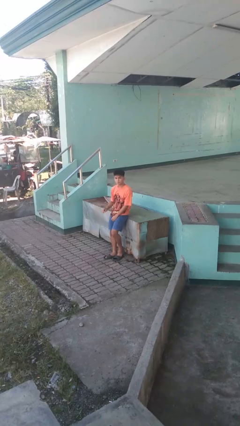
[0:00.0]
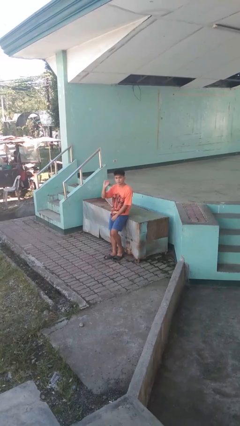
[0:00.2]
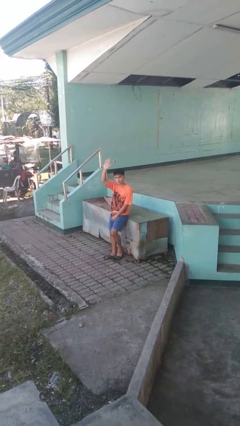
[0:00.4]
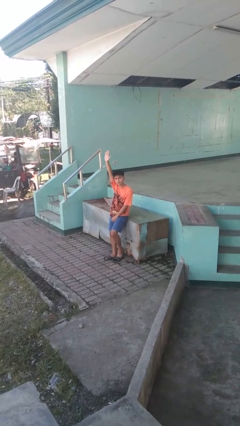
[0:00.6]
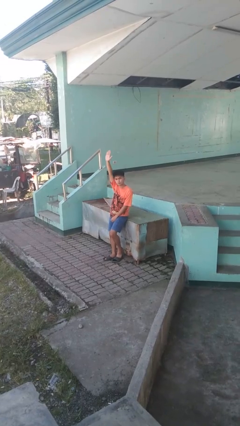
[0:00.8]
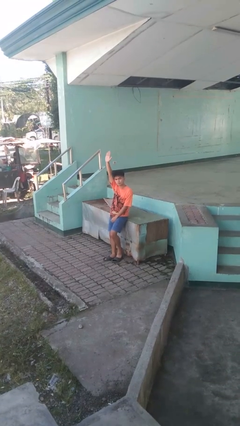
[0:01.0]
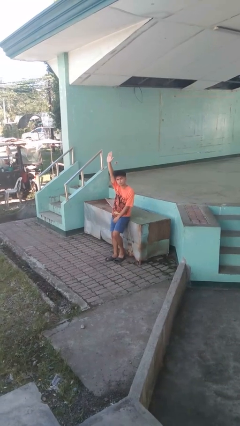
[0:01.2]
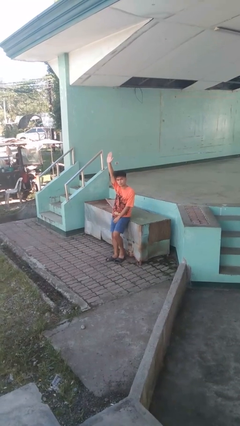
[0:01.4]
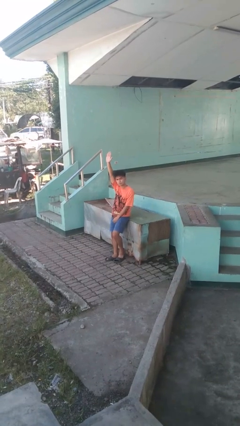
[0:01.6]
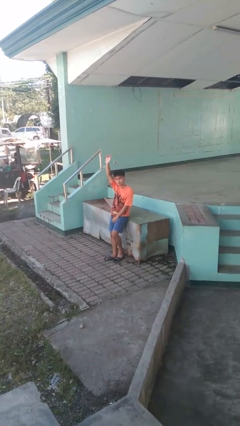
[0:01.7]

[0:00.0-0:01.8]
person gestures raise hand

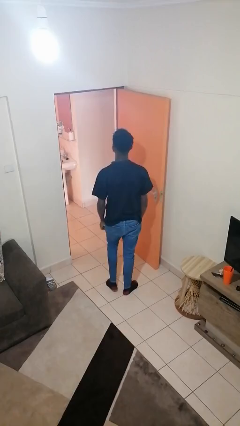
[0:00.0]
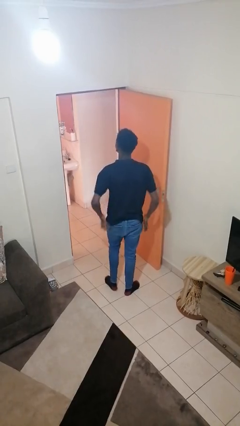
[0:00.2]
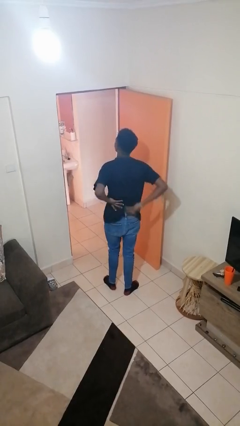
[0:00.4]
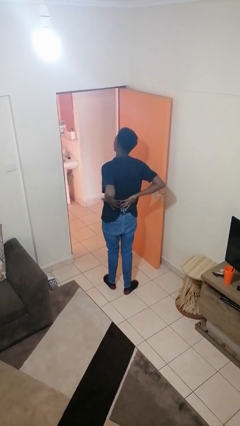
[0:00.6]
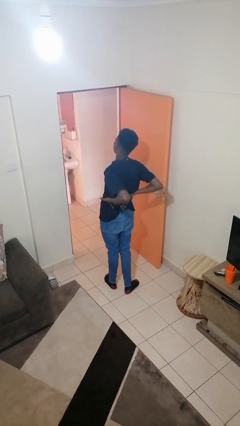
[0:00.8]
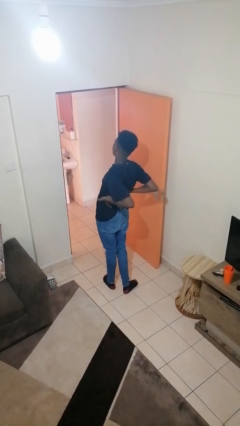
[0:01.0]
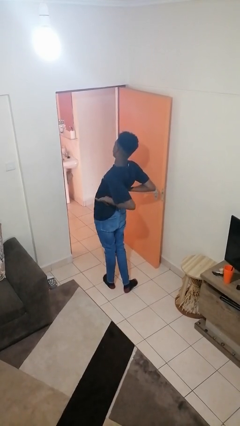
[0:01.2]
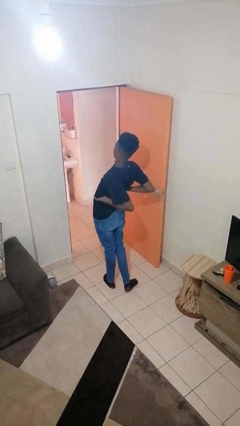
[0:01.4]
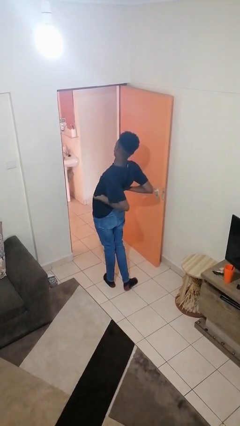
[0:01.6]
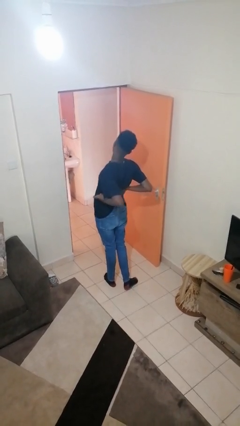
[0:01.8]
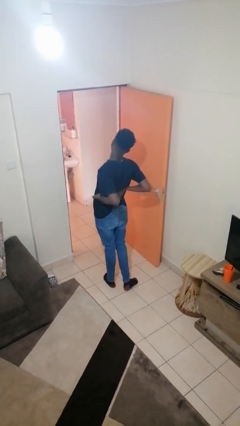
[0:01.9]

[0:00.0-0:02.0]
person stretches back

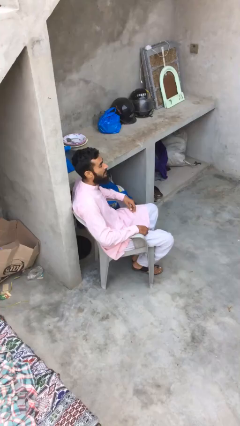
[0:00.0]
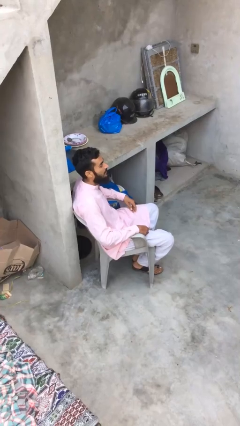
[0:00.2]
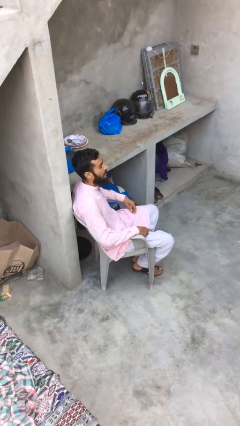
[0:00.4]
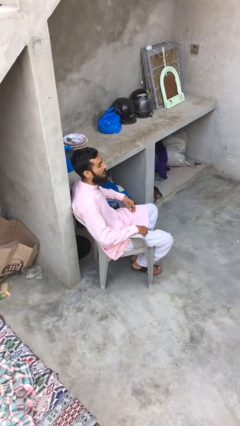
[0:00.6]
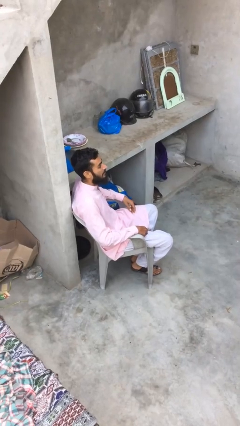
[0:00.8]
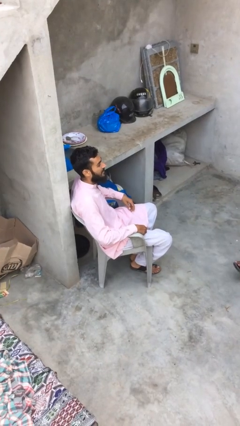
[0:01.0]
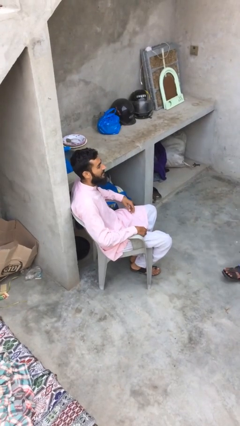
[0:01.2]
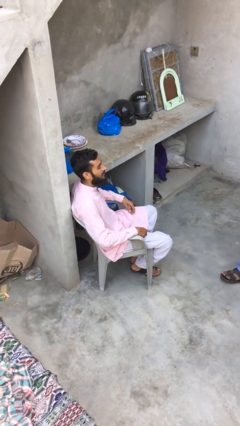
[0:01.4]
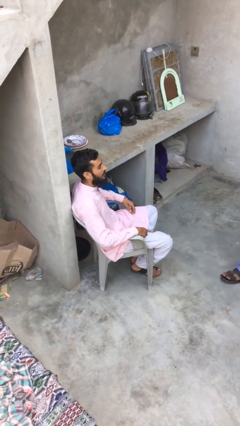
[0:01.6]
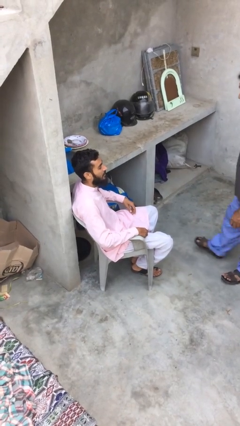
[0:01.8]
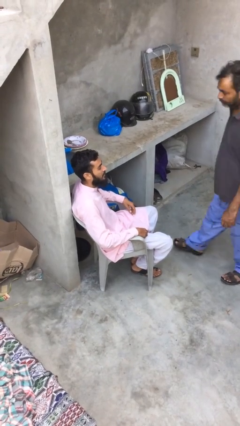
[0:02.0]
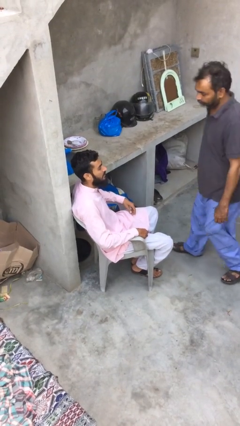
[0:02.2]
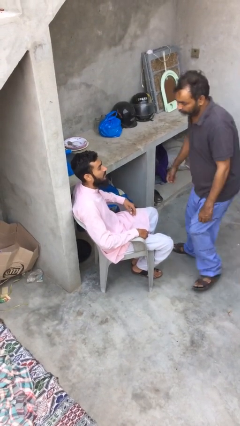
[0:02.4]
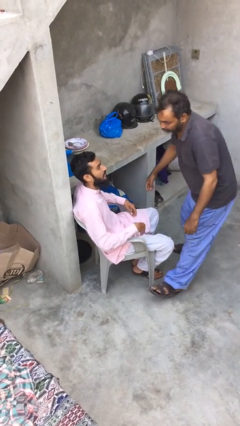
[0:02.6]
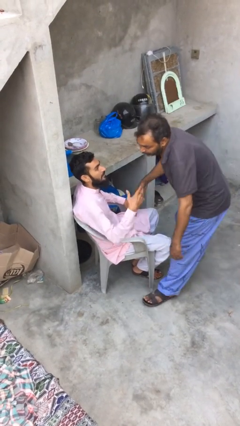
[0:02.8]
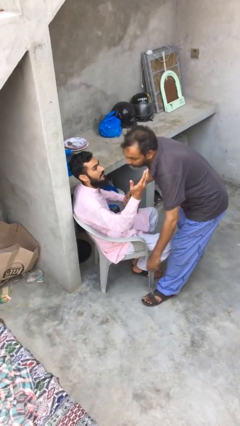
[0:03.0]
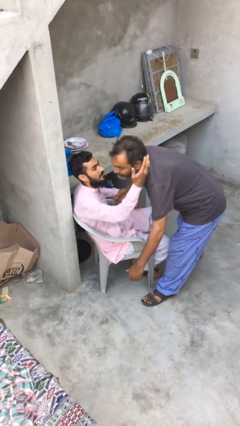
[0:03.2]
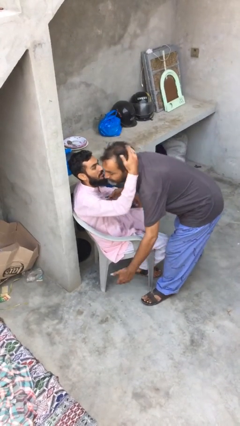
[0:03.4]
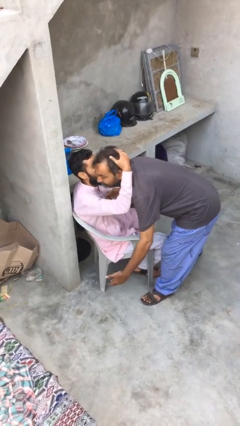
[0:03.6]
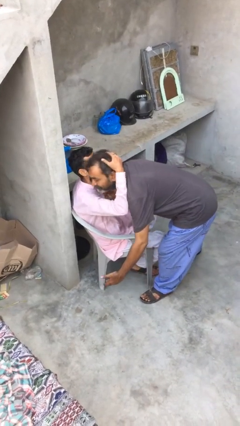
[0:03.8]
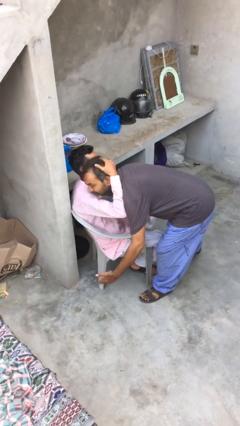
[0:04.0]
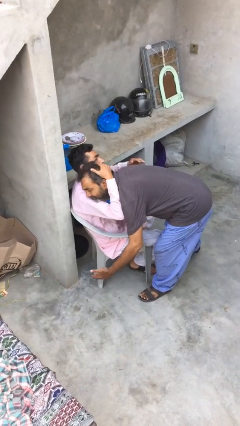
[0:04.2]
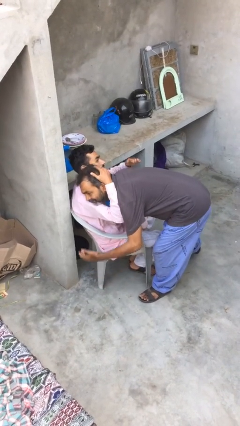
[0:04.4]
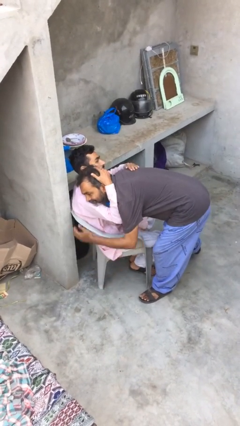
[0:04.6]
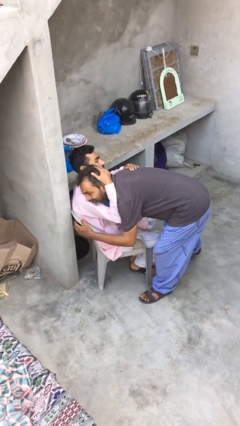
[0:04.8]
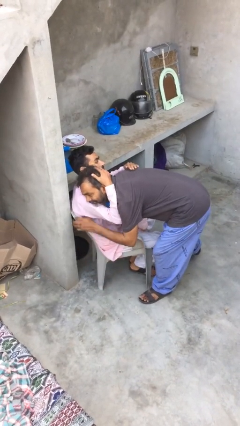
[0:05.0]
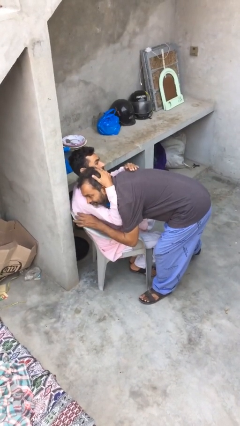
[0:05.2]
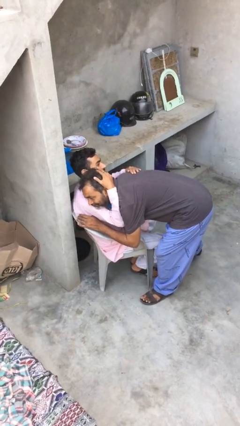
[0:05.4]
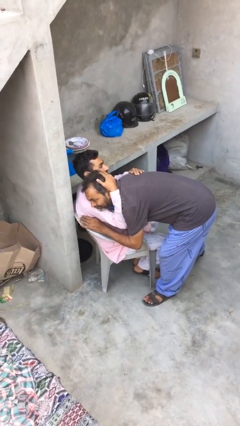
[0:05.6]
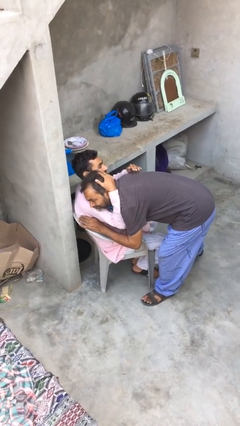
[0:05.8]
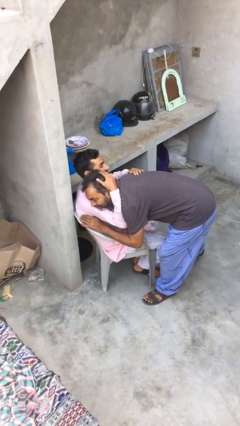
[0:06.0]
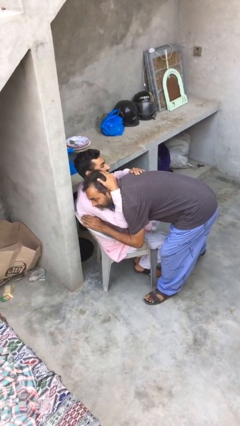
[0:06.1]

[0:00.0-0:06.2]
person embraces person

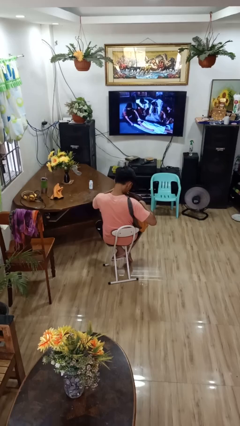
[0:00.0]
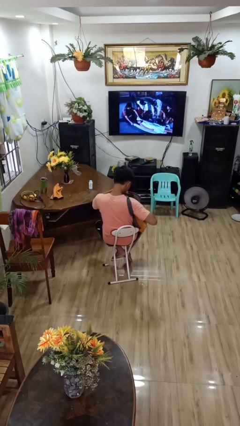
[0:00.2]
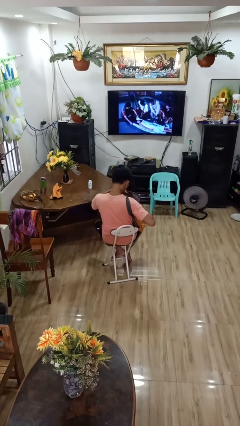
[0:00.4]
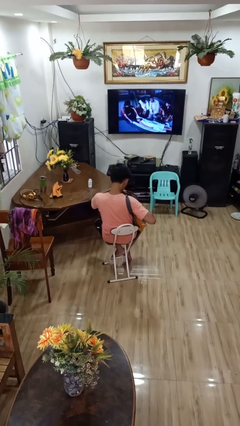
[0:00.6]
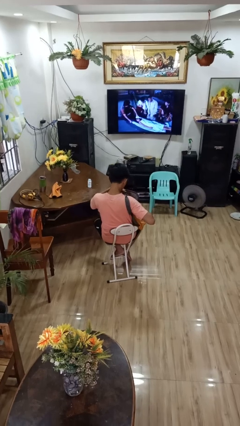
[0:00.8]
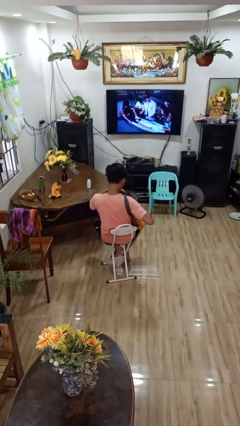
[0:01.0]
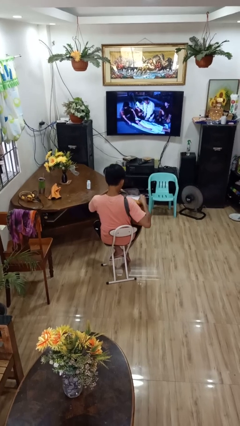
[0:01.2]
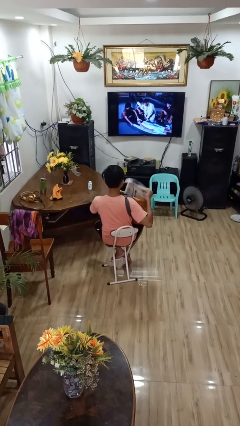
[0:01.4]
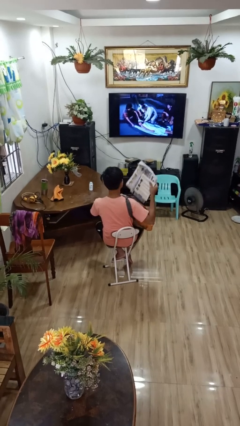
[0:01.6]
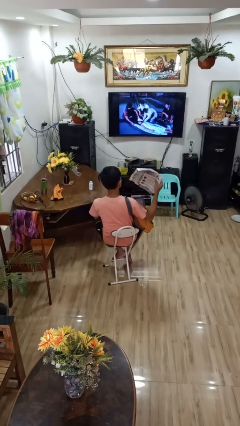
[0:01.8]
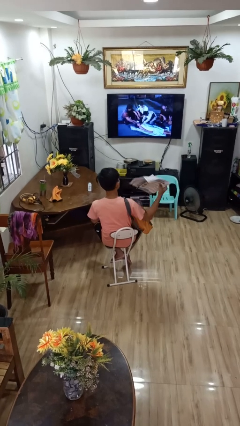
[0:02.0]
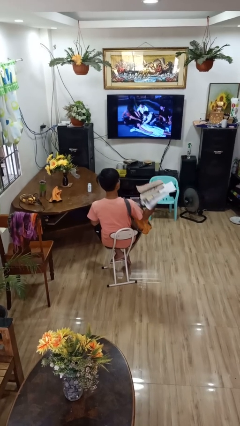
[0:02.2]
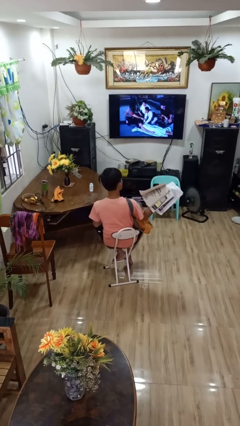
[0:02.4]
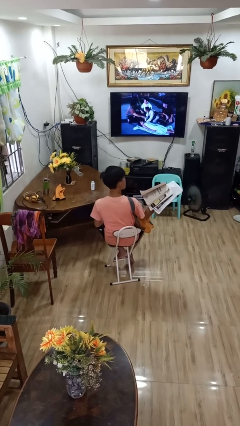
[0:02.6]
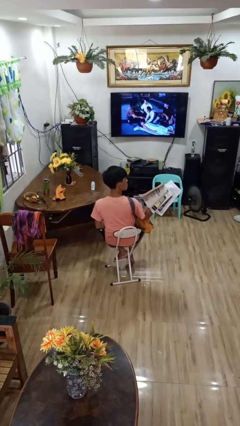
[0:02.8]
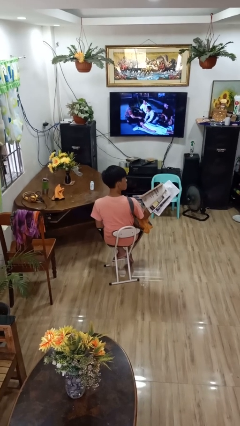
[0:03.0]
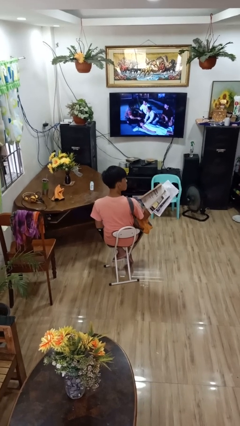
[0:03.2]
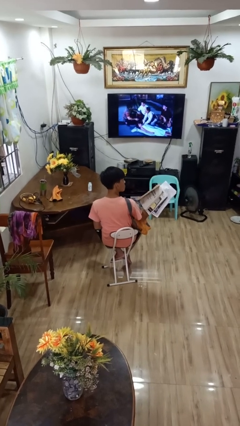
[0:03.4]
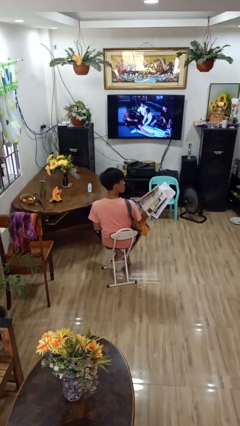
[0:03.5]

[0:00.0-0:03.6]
person takes object from backpack

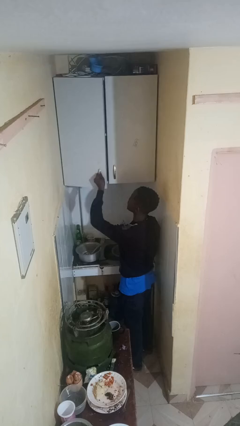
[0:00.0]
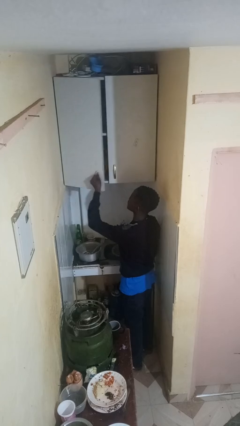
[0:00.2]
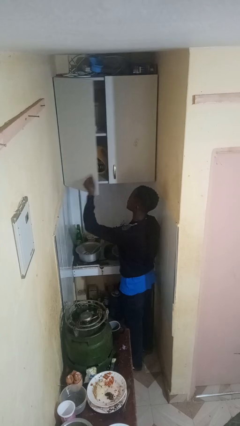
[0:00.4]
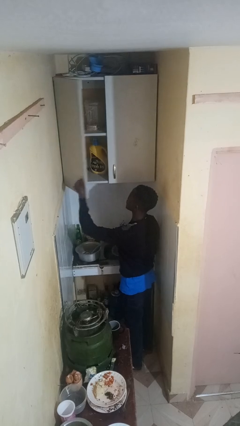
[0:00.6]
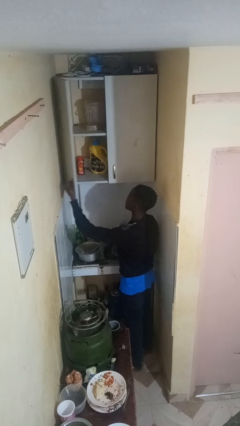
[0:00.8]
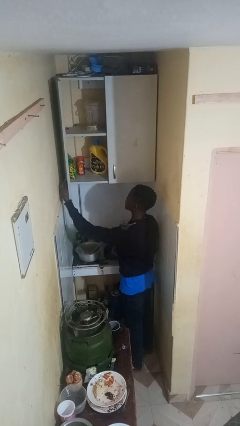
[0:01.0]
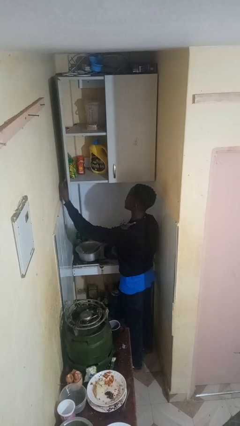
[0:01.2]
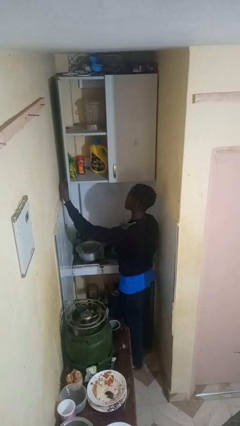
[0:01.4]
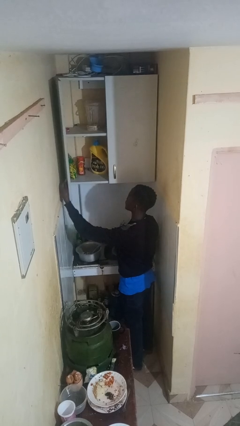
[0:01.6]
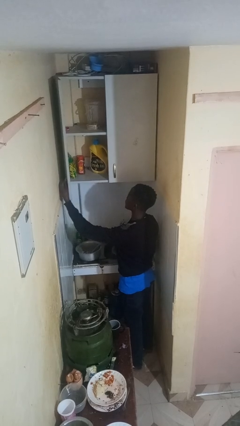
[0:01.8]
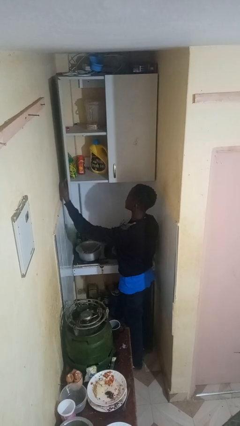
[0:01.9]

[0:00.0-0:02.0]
person opens kitchen drawer

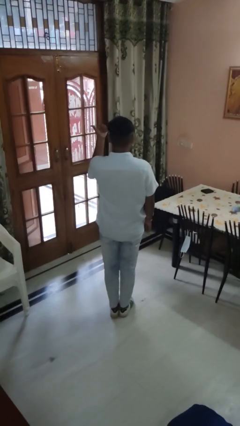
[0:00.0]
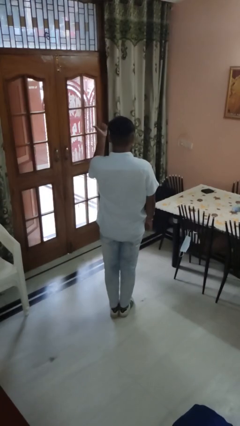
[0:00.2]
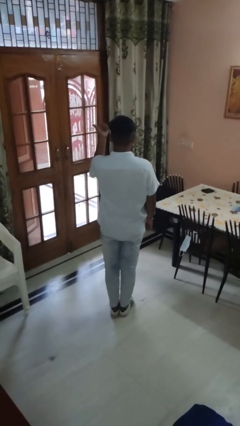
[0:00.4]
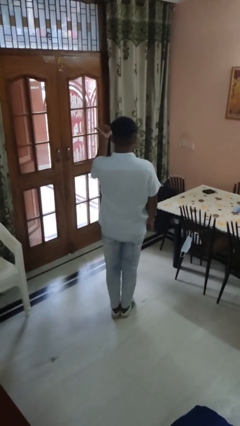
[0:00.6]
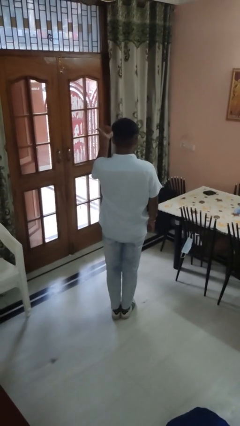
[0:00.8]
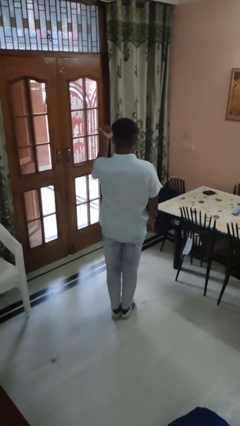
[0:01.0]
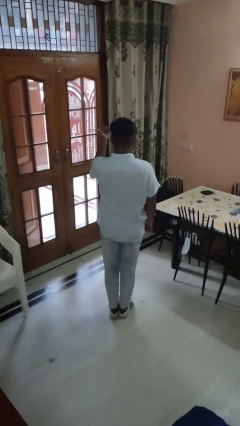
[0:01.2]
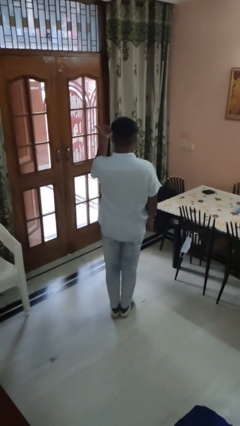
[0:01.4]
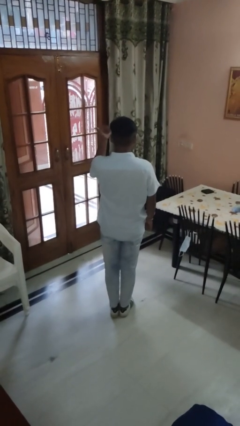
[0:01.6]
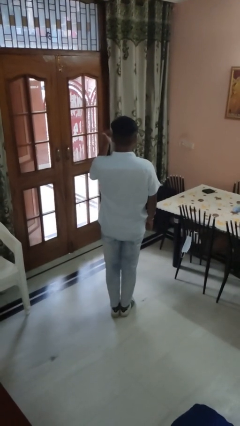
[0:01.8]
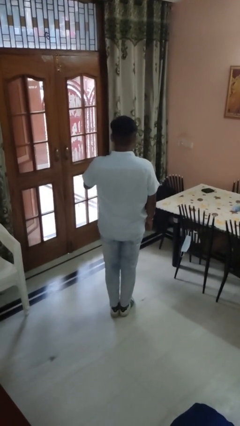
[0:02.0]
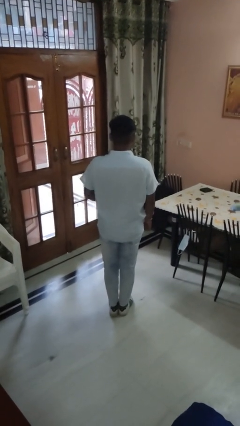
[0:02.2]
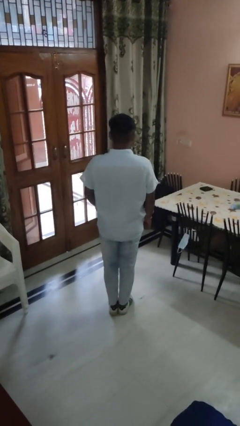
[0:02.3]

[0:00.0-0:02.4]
person gestures hang loose
